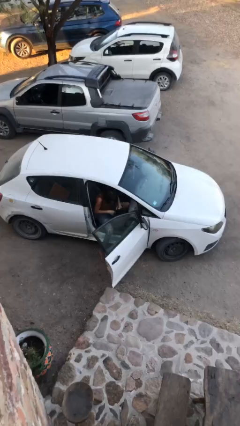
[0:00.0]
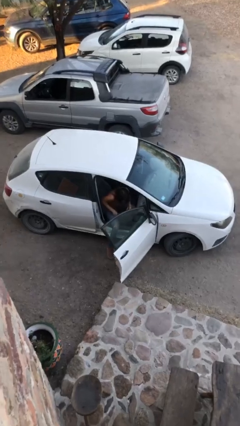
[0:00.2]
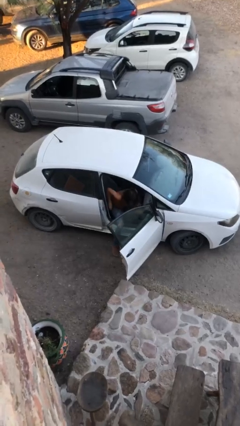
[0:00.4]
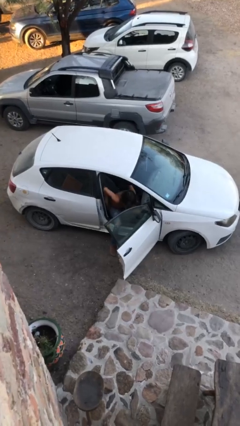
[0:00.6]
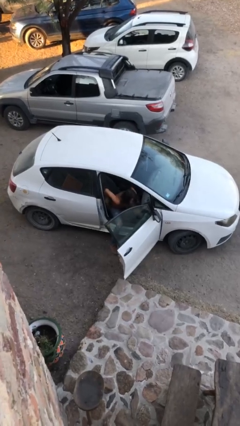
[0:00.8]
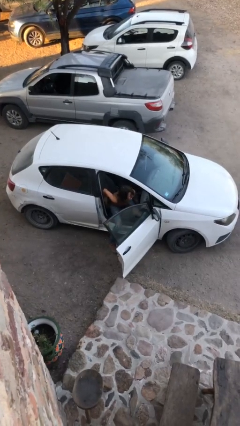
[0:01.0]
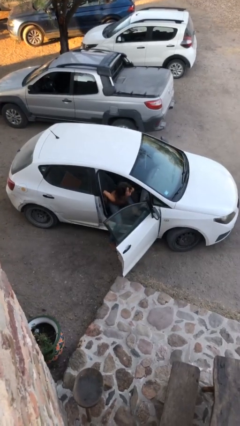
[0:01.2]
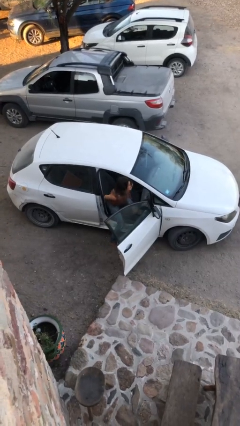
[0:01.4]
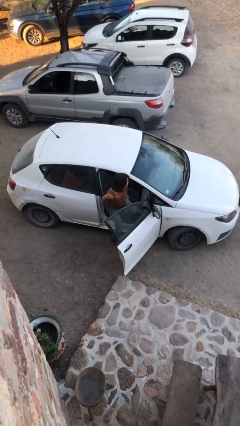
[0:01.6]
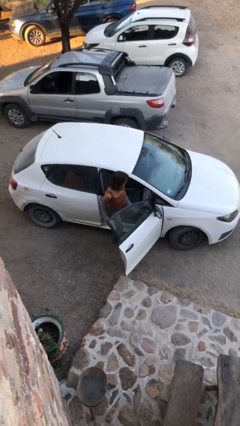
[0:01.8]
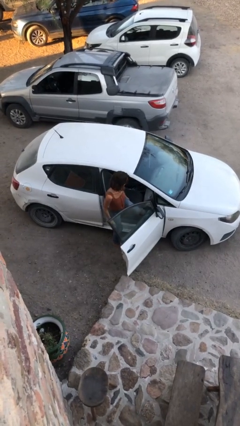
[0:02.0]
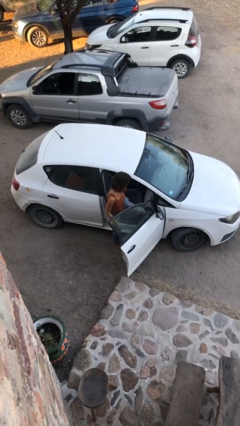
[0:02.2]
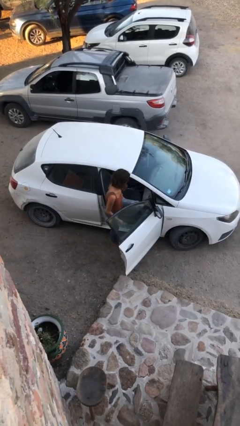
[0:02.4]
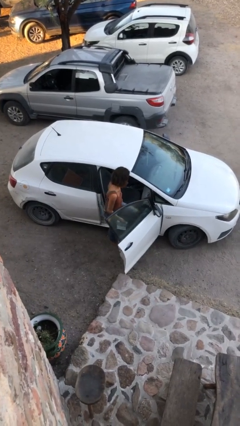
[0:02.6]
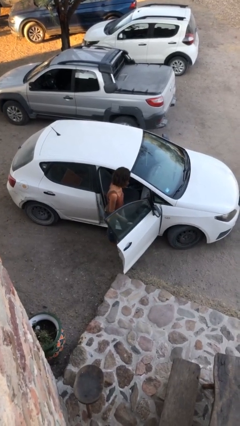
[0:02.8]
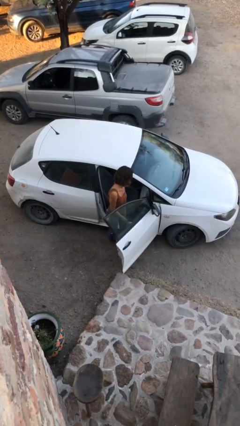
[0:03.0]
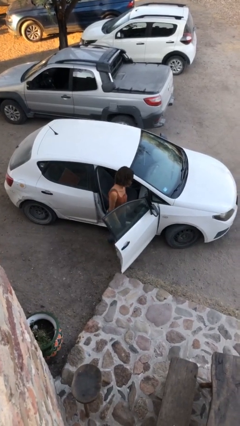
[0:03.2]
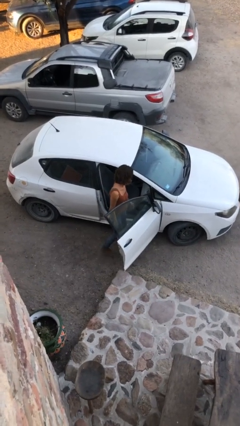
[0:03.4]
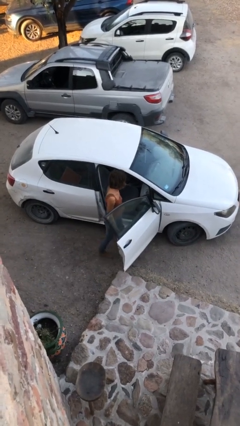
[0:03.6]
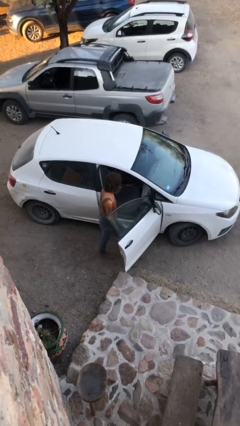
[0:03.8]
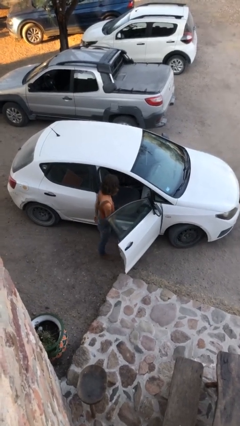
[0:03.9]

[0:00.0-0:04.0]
person exits car

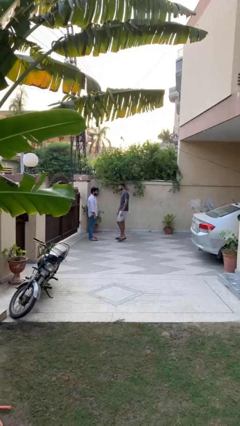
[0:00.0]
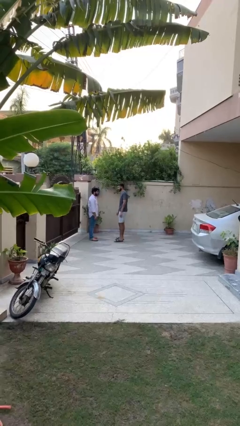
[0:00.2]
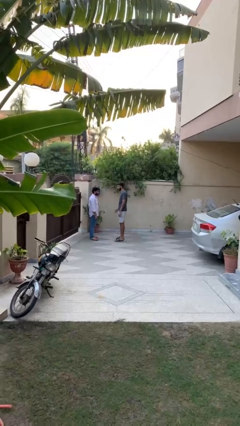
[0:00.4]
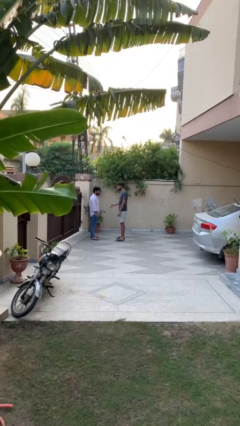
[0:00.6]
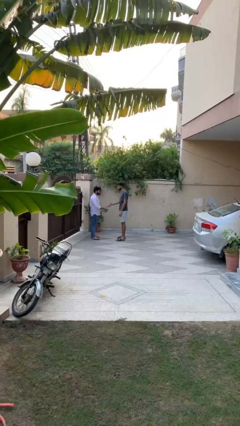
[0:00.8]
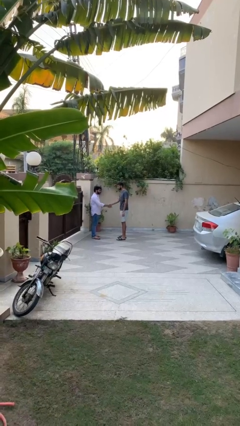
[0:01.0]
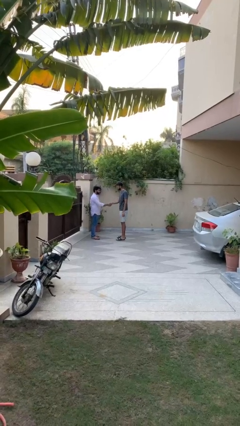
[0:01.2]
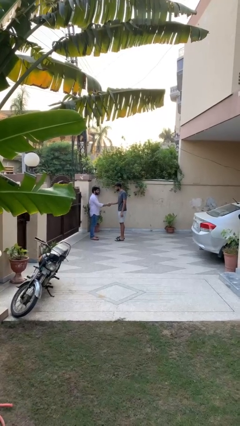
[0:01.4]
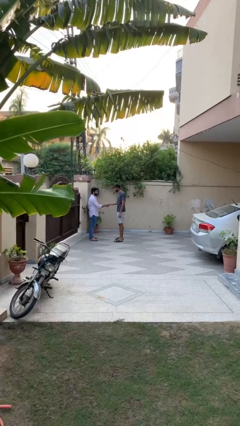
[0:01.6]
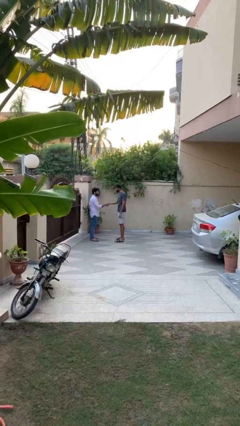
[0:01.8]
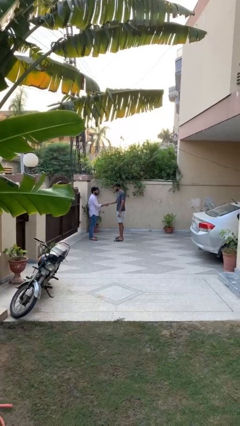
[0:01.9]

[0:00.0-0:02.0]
person shakes hand

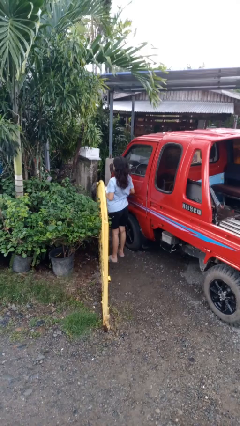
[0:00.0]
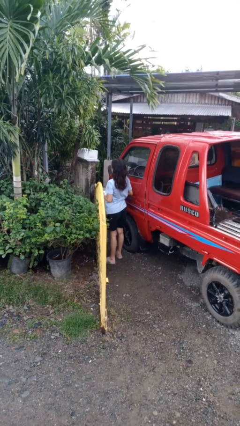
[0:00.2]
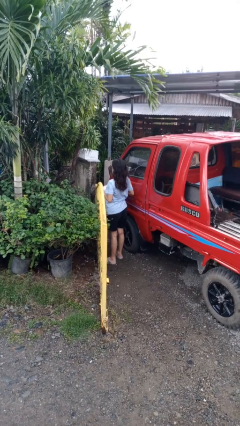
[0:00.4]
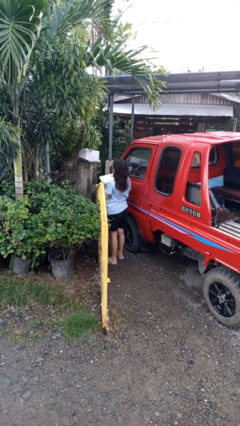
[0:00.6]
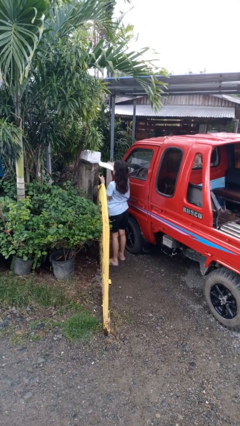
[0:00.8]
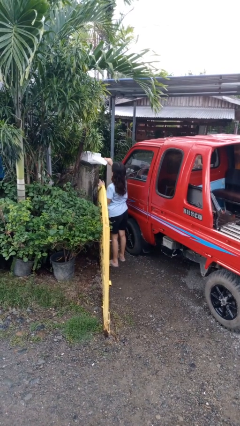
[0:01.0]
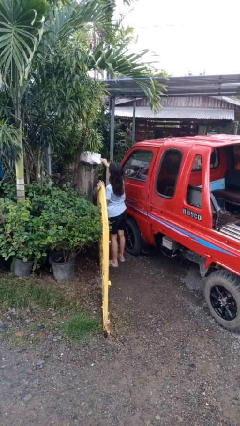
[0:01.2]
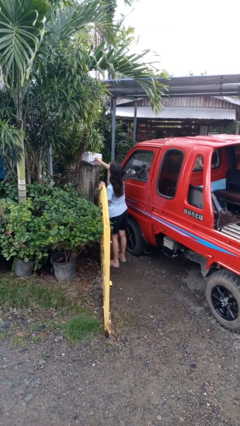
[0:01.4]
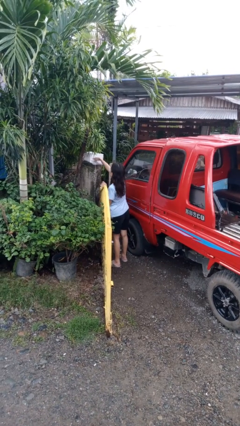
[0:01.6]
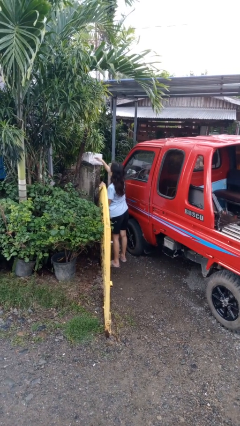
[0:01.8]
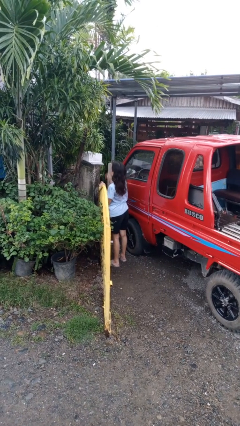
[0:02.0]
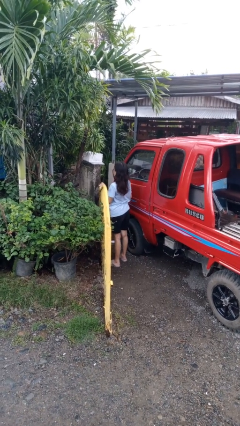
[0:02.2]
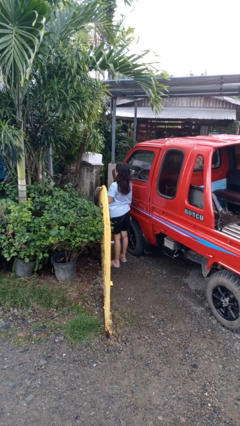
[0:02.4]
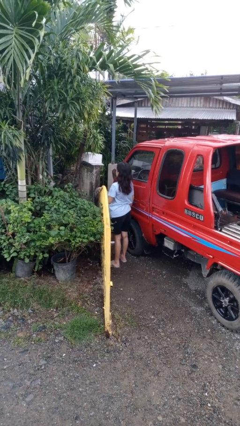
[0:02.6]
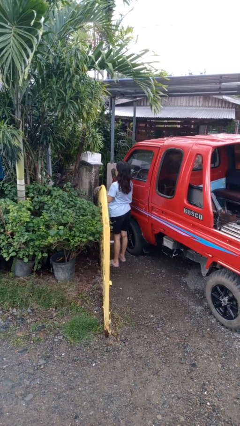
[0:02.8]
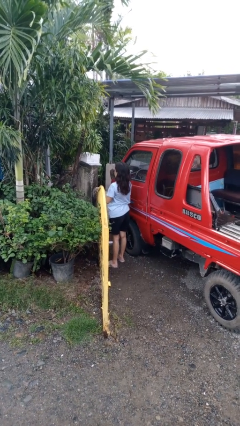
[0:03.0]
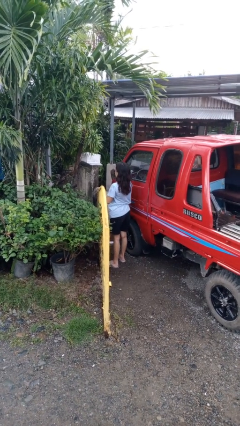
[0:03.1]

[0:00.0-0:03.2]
person puts letters in mailbox

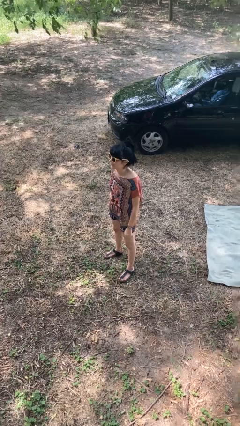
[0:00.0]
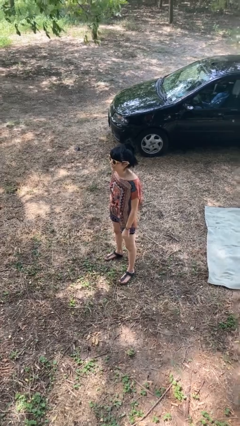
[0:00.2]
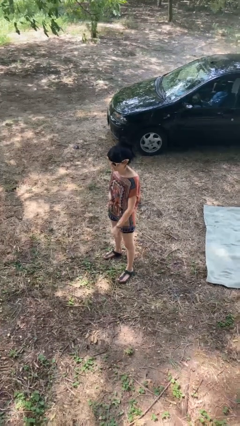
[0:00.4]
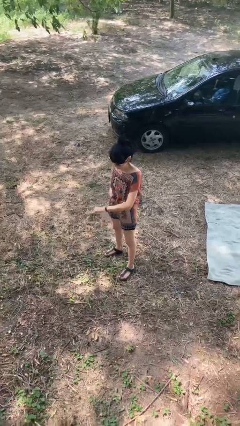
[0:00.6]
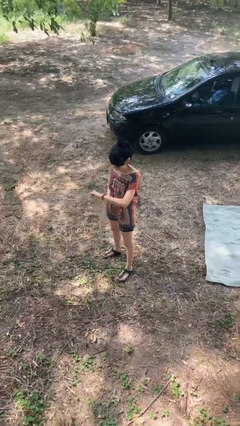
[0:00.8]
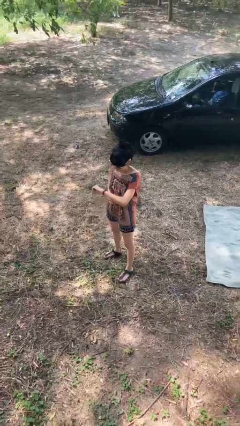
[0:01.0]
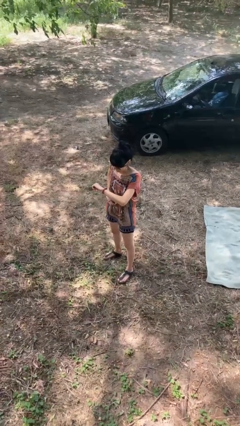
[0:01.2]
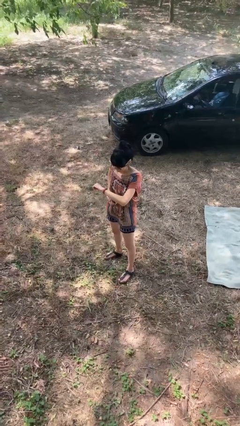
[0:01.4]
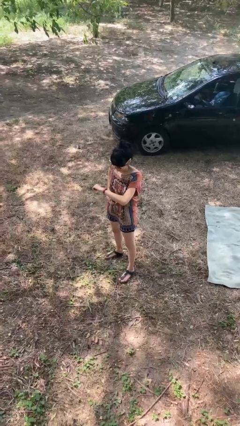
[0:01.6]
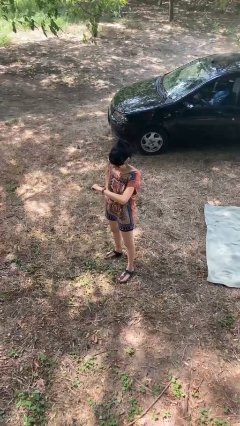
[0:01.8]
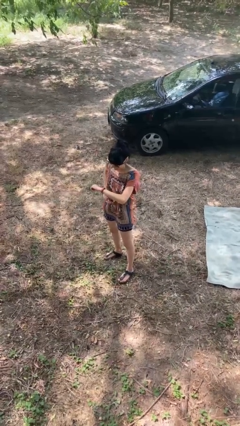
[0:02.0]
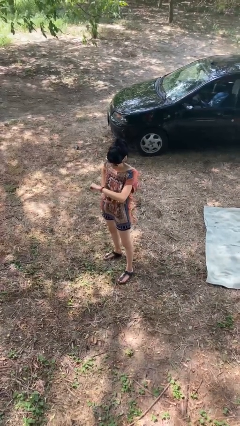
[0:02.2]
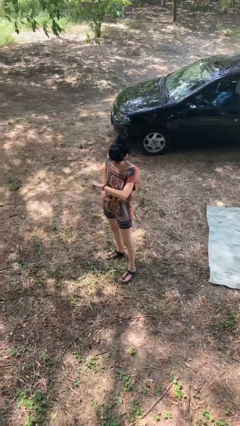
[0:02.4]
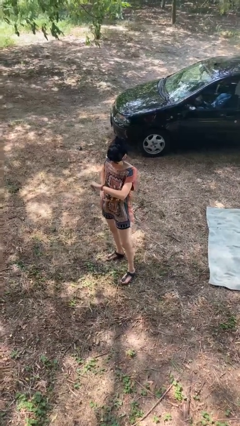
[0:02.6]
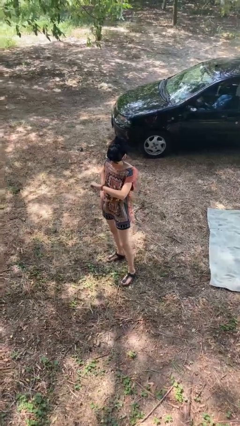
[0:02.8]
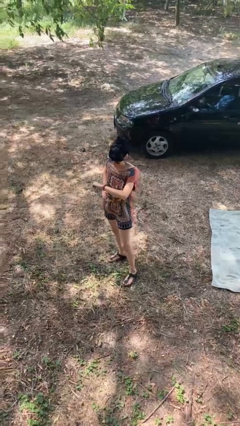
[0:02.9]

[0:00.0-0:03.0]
person looks at wristwatch

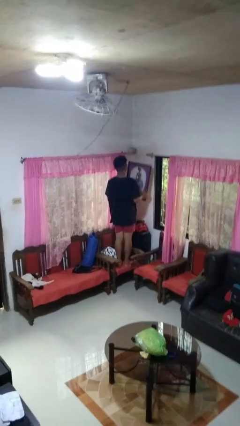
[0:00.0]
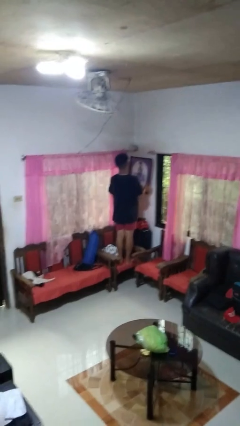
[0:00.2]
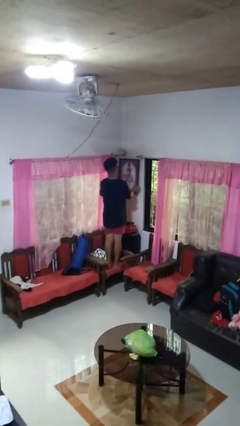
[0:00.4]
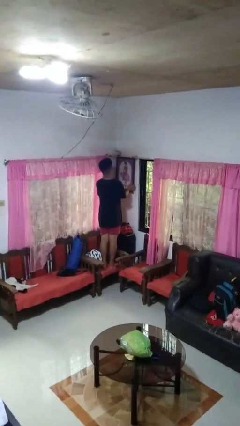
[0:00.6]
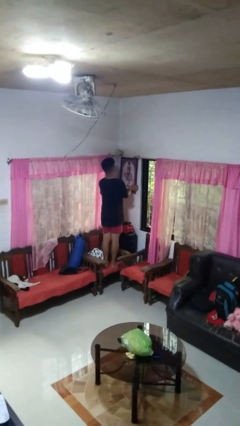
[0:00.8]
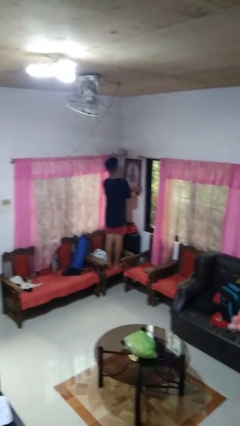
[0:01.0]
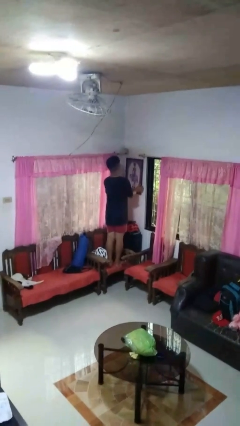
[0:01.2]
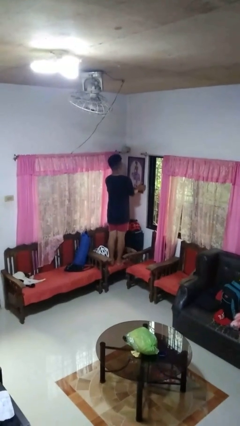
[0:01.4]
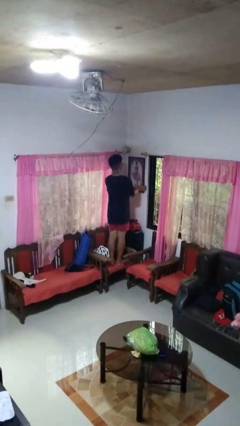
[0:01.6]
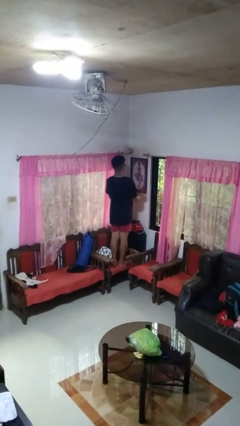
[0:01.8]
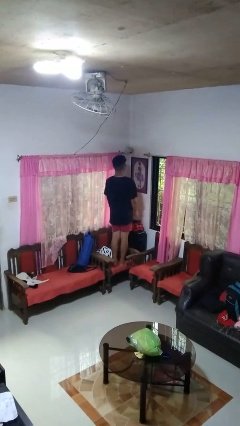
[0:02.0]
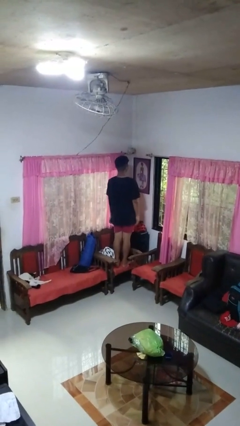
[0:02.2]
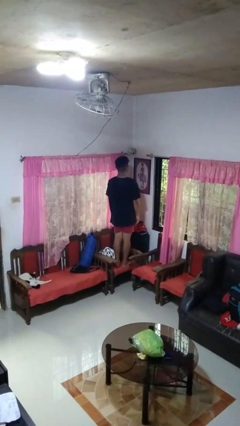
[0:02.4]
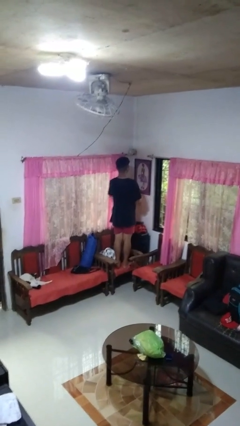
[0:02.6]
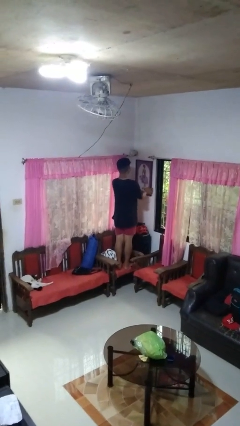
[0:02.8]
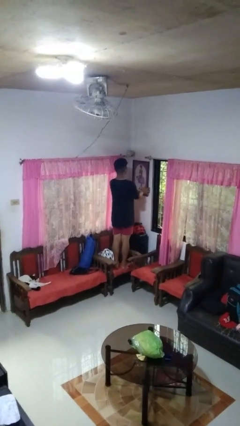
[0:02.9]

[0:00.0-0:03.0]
person puts up picture frame

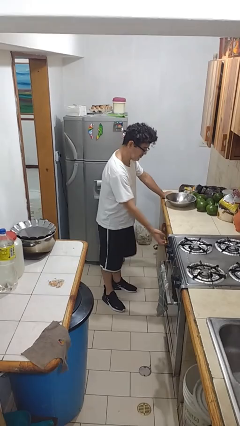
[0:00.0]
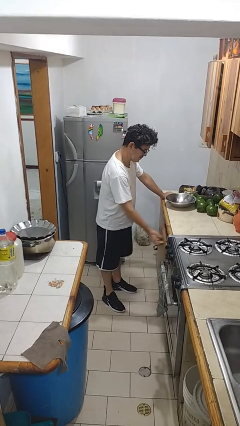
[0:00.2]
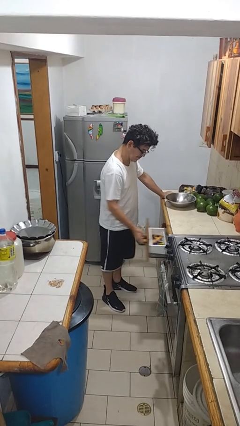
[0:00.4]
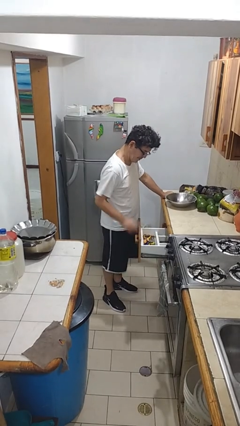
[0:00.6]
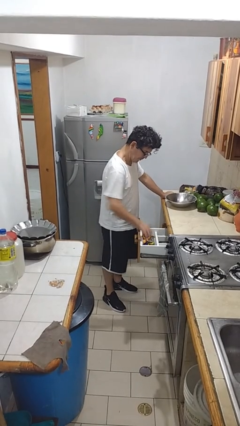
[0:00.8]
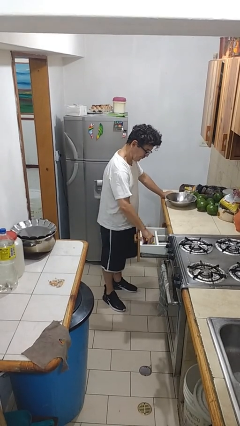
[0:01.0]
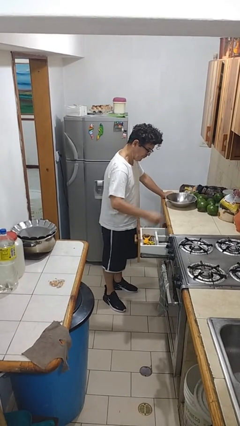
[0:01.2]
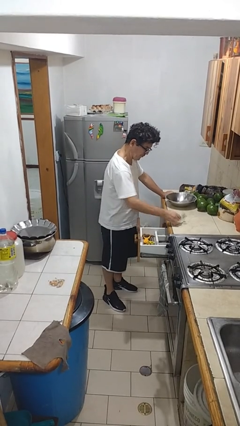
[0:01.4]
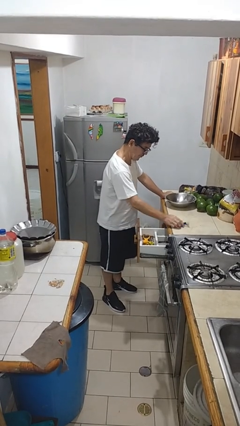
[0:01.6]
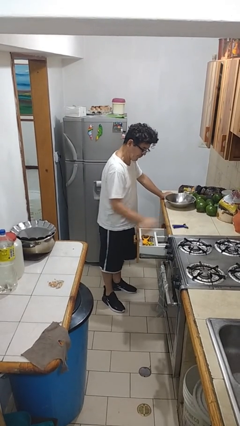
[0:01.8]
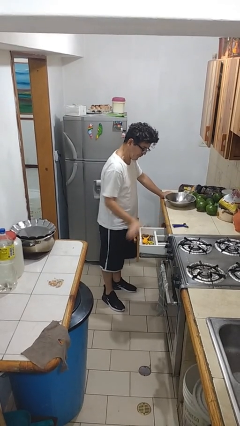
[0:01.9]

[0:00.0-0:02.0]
person takes object from kitchen drawer

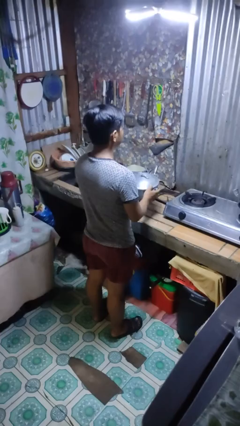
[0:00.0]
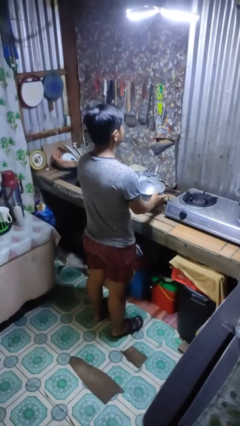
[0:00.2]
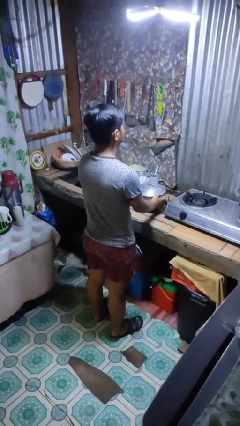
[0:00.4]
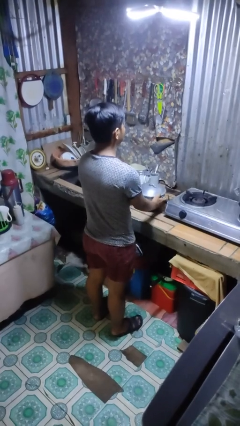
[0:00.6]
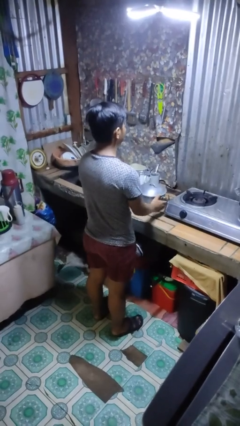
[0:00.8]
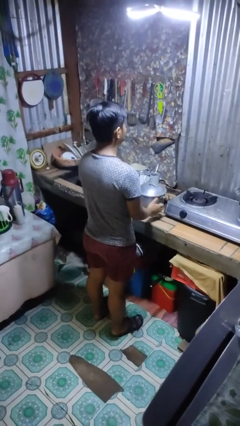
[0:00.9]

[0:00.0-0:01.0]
person puts down object on countertop
